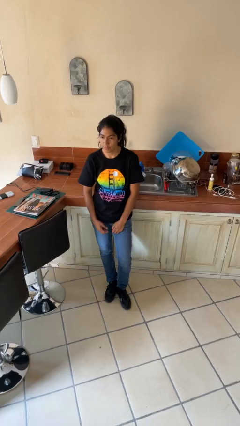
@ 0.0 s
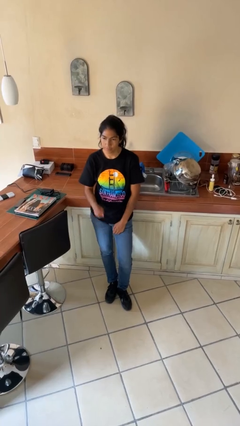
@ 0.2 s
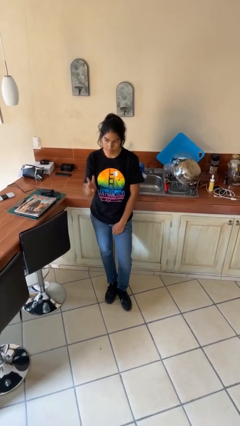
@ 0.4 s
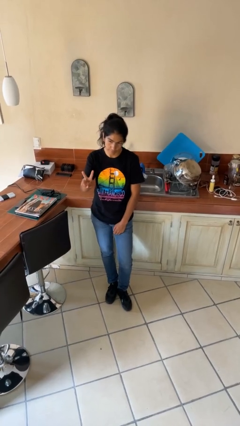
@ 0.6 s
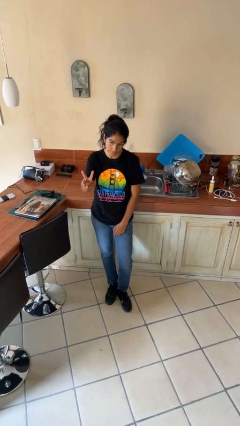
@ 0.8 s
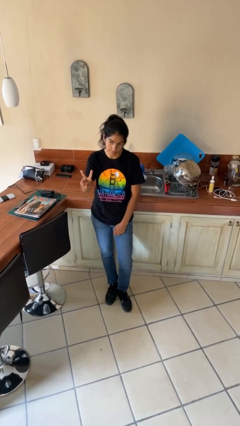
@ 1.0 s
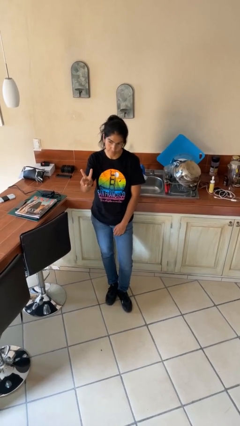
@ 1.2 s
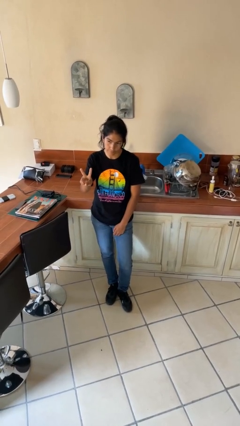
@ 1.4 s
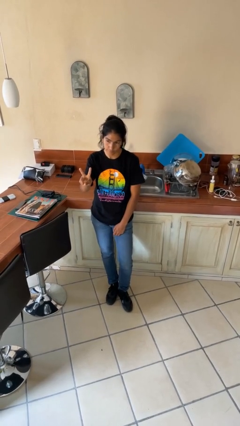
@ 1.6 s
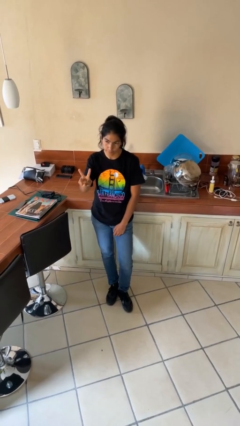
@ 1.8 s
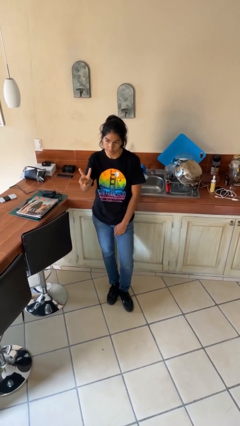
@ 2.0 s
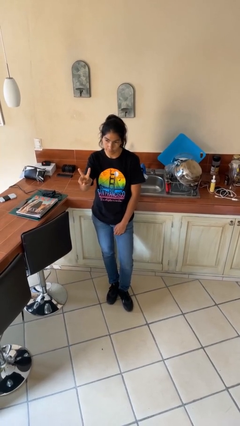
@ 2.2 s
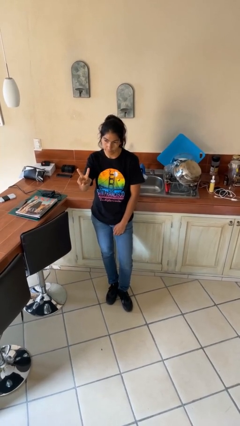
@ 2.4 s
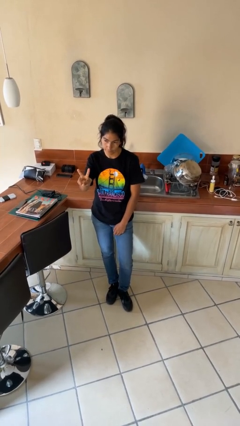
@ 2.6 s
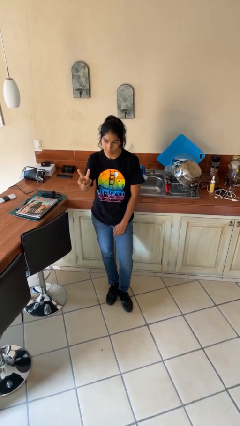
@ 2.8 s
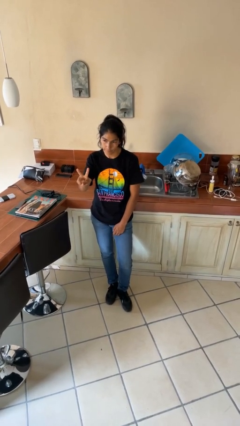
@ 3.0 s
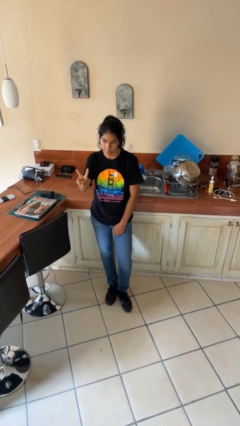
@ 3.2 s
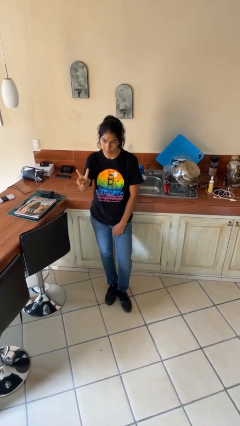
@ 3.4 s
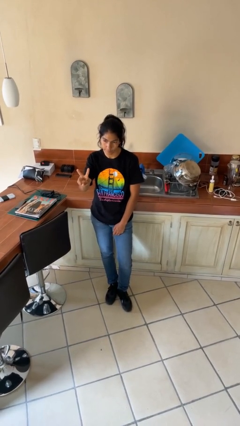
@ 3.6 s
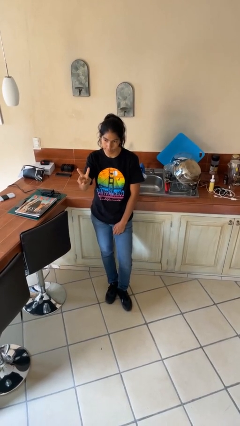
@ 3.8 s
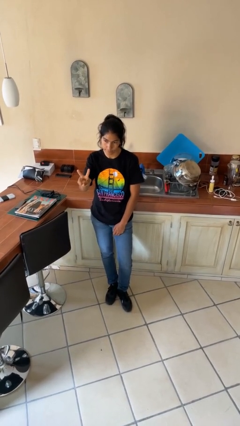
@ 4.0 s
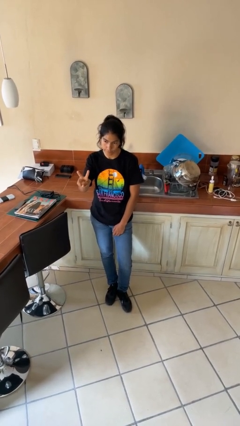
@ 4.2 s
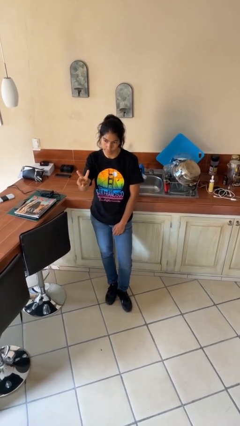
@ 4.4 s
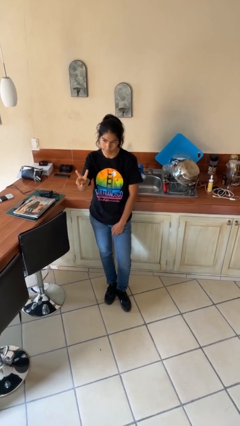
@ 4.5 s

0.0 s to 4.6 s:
person gestures peace

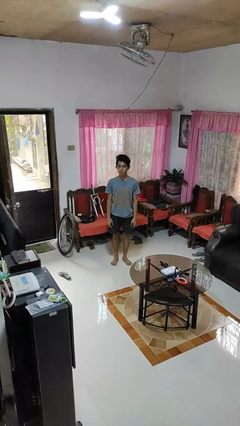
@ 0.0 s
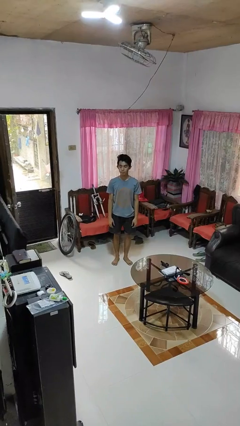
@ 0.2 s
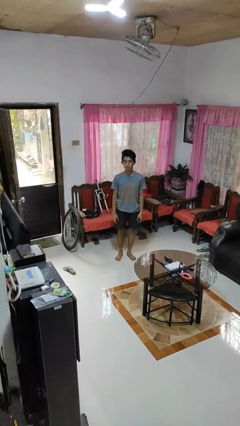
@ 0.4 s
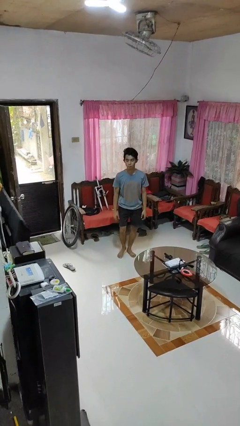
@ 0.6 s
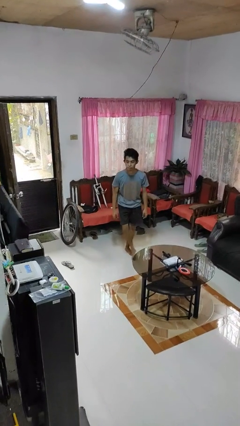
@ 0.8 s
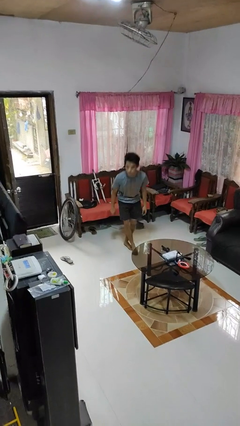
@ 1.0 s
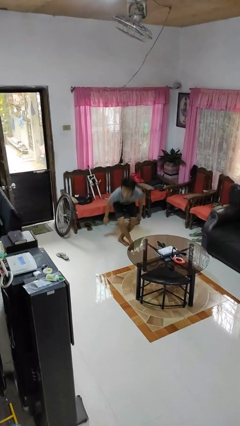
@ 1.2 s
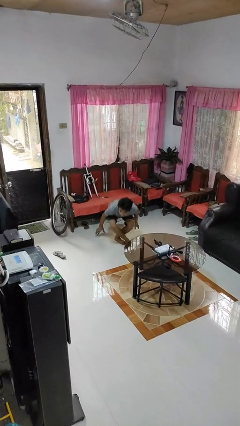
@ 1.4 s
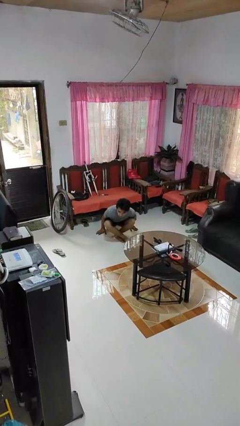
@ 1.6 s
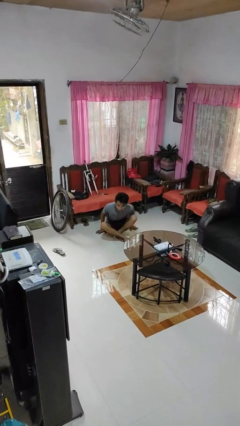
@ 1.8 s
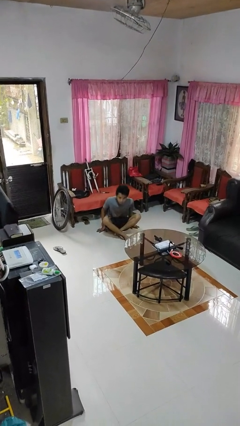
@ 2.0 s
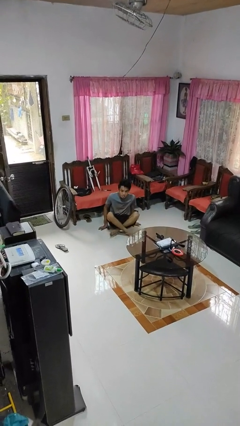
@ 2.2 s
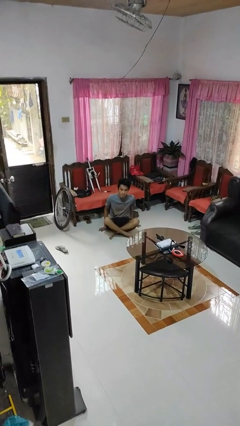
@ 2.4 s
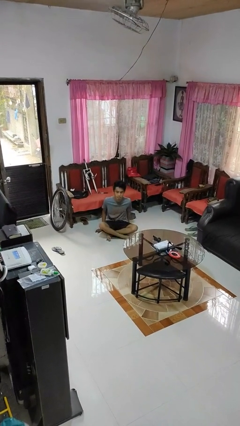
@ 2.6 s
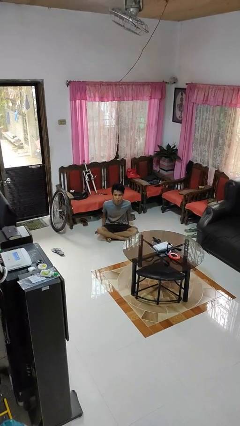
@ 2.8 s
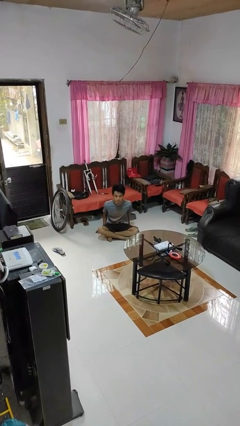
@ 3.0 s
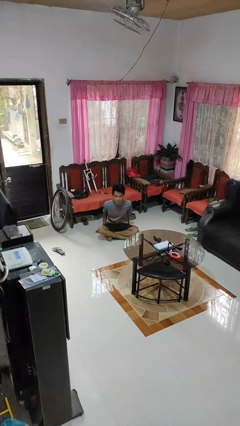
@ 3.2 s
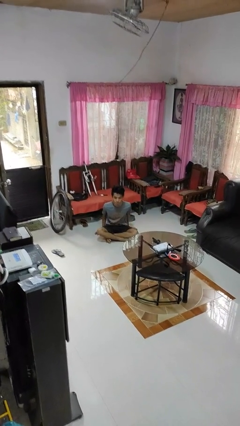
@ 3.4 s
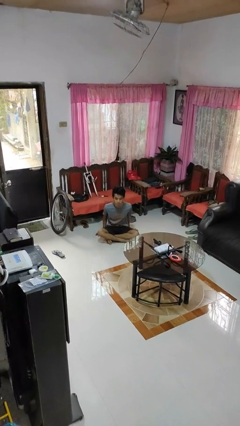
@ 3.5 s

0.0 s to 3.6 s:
person sits crisscross

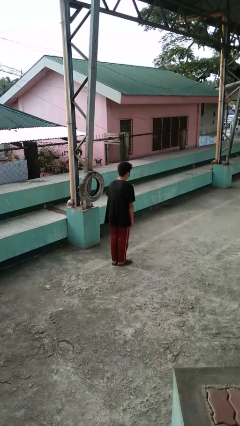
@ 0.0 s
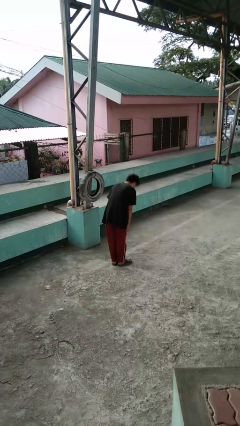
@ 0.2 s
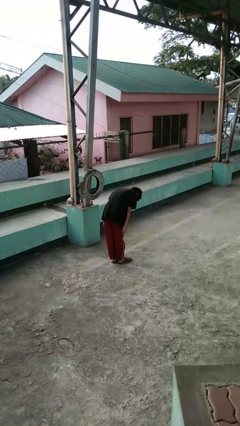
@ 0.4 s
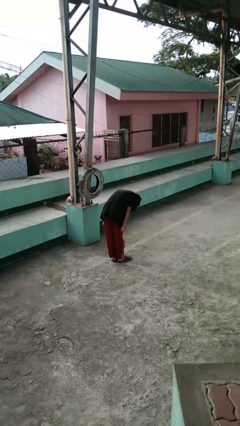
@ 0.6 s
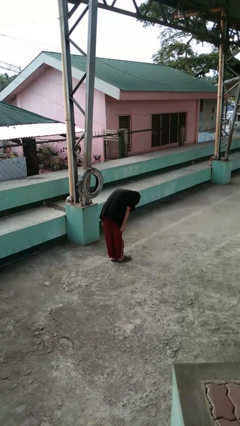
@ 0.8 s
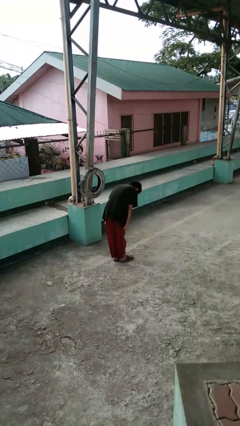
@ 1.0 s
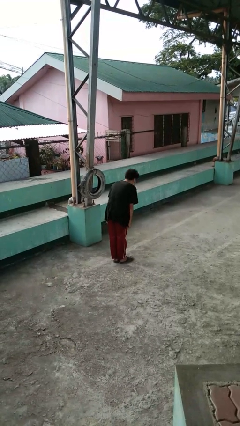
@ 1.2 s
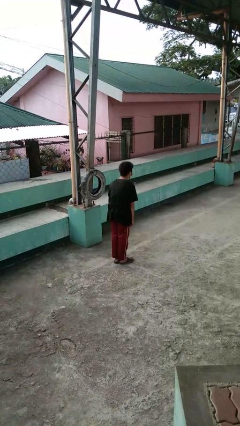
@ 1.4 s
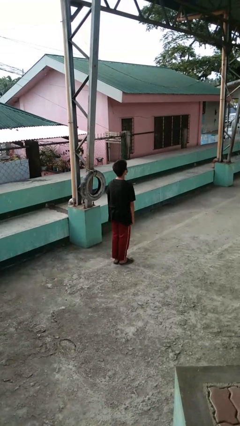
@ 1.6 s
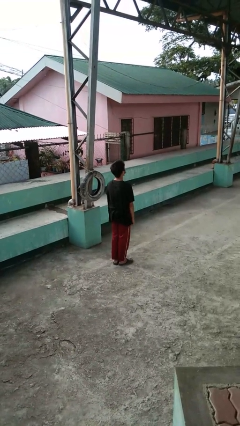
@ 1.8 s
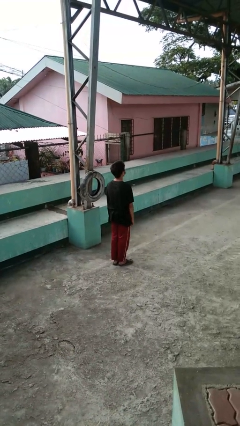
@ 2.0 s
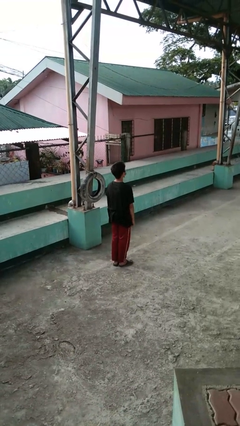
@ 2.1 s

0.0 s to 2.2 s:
person bows

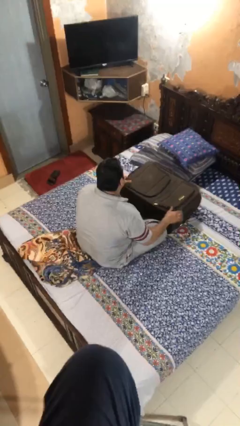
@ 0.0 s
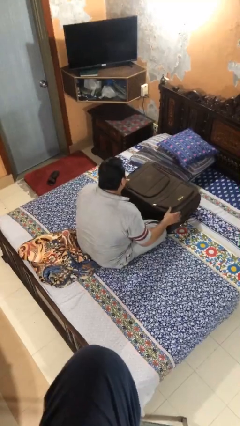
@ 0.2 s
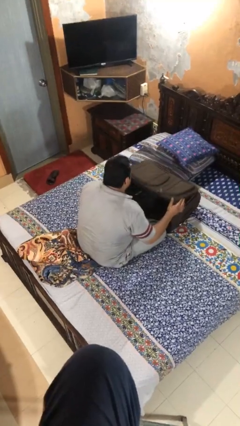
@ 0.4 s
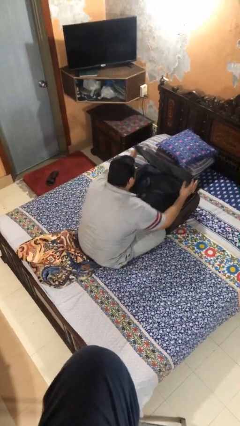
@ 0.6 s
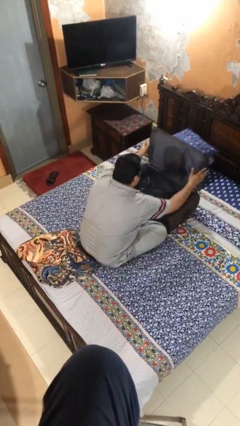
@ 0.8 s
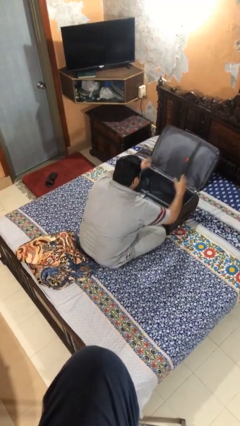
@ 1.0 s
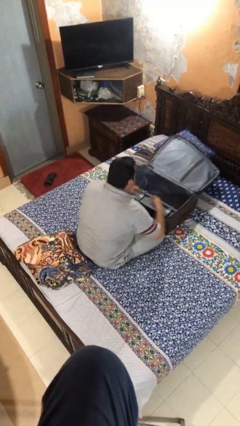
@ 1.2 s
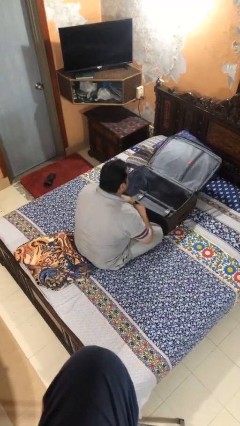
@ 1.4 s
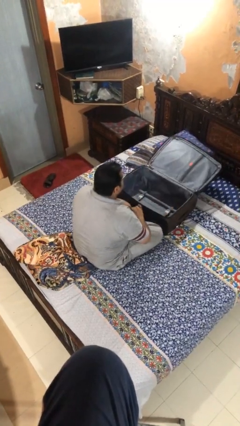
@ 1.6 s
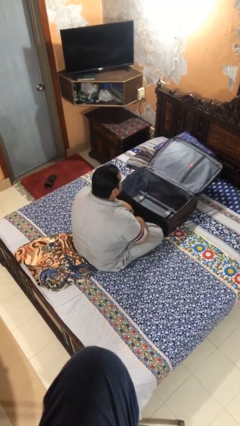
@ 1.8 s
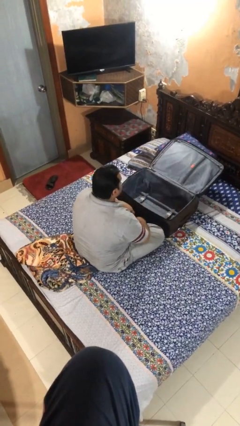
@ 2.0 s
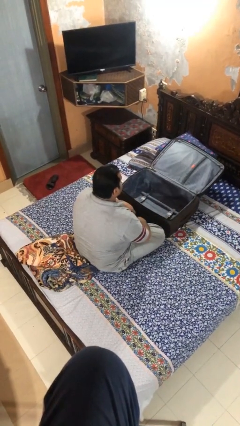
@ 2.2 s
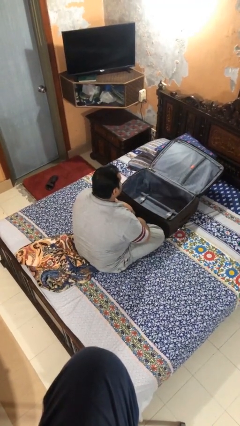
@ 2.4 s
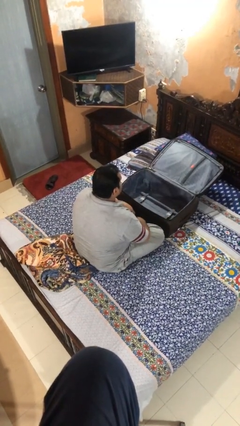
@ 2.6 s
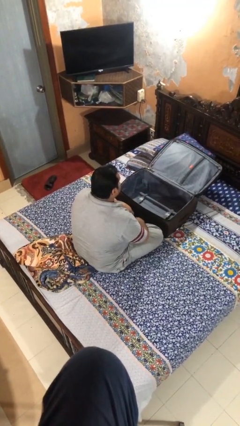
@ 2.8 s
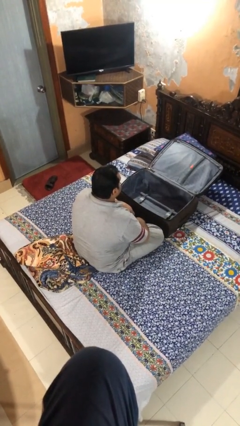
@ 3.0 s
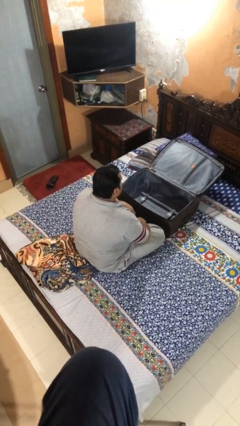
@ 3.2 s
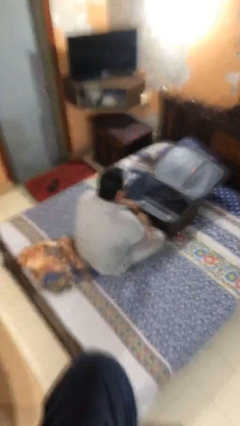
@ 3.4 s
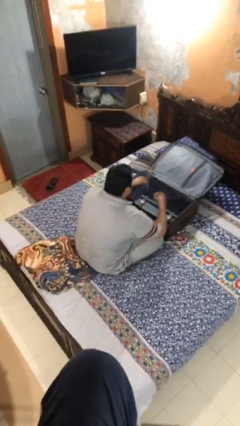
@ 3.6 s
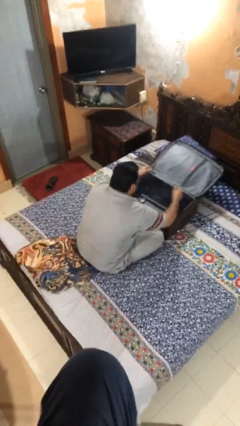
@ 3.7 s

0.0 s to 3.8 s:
person opens suitcase

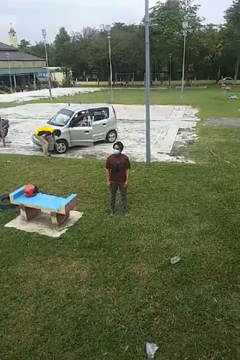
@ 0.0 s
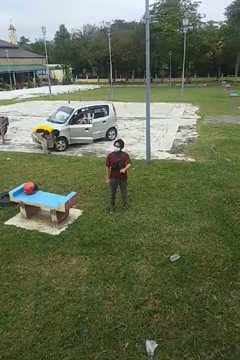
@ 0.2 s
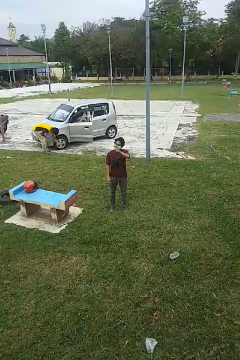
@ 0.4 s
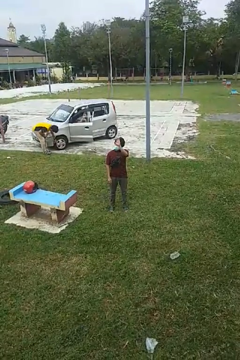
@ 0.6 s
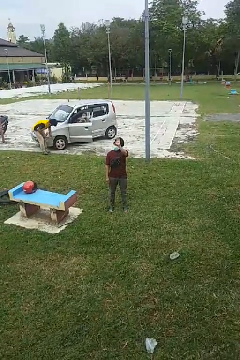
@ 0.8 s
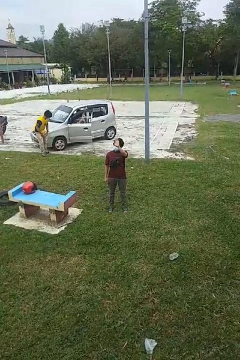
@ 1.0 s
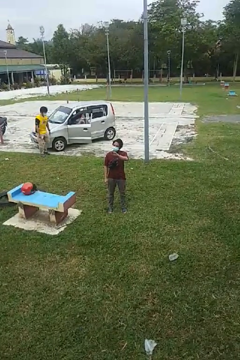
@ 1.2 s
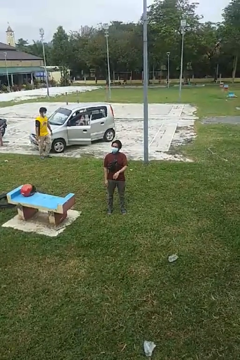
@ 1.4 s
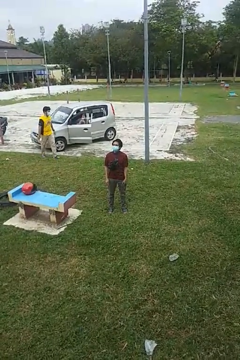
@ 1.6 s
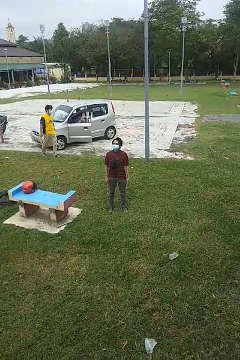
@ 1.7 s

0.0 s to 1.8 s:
person waves at person

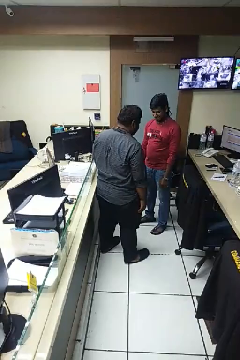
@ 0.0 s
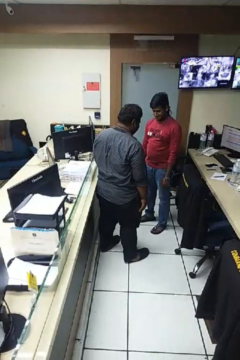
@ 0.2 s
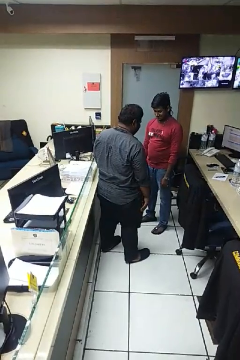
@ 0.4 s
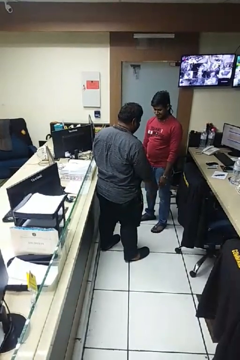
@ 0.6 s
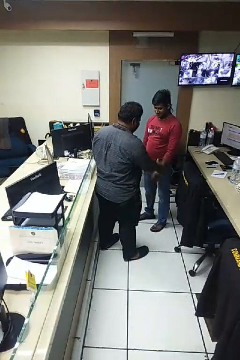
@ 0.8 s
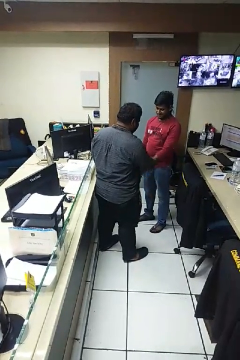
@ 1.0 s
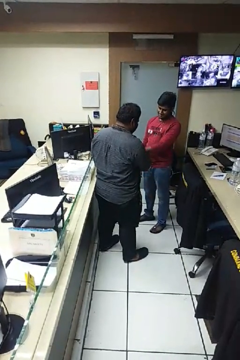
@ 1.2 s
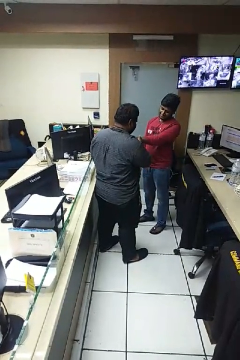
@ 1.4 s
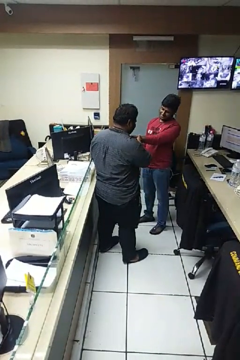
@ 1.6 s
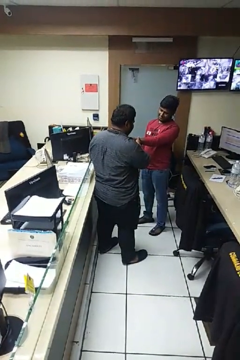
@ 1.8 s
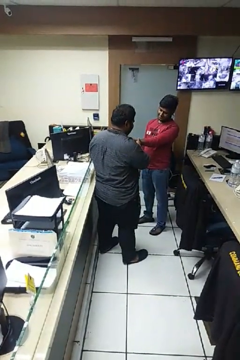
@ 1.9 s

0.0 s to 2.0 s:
person grabs person by forearm

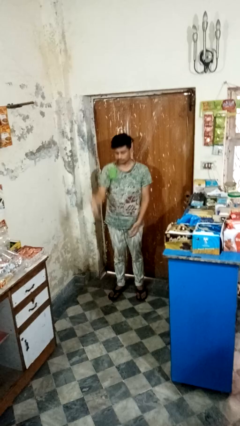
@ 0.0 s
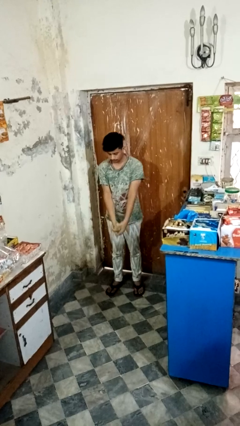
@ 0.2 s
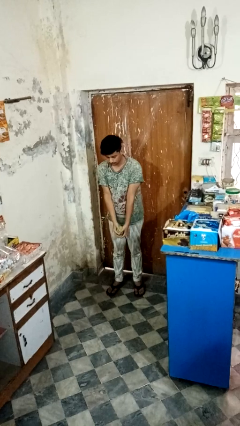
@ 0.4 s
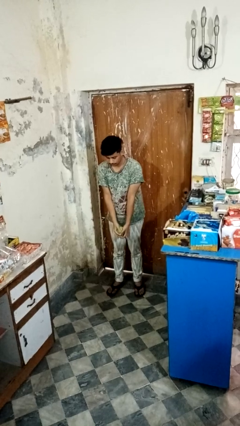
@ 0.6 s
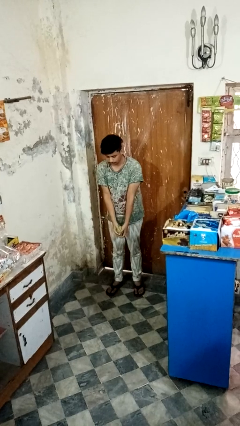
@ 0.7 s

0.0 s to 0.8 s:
person catches dropped object
